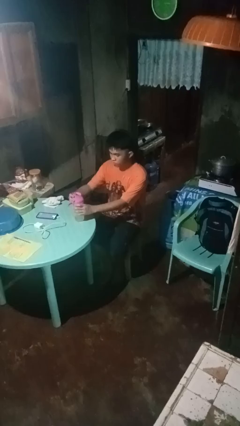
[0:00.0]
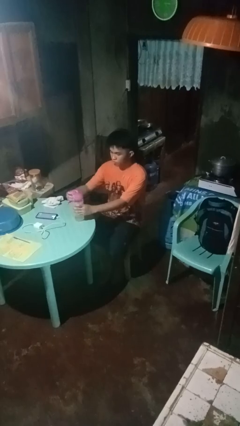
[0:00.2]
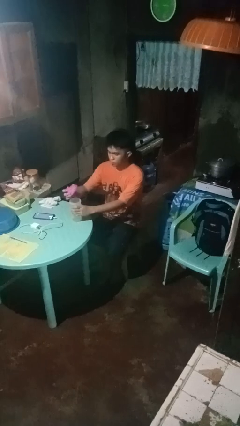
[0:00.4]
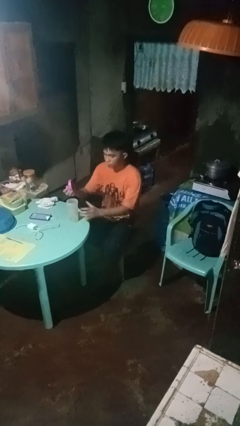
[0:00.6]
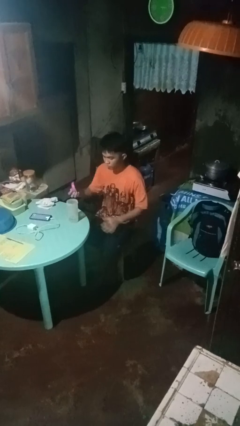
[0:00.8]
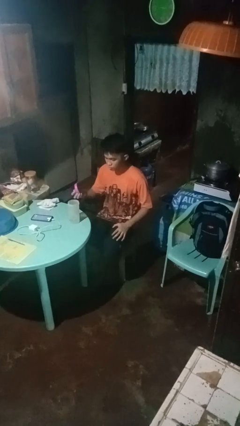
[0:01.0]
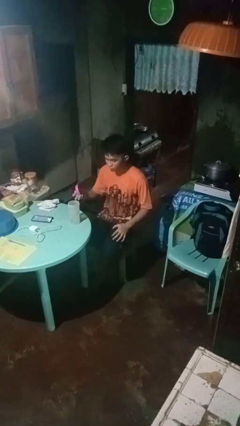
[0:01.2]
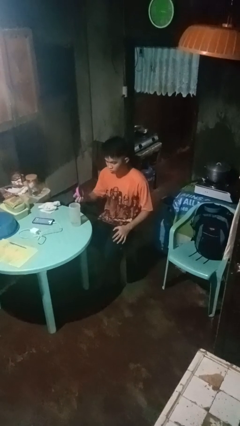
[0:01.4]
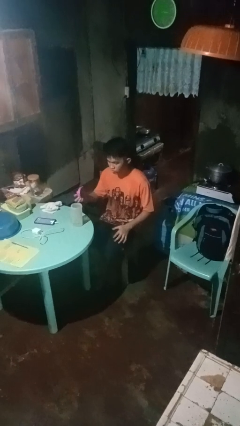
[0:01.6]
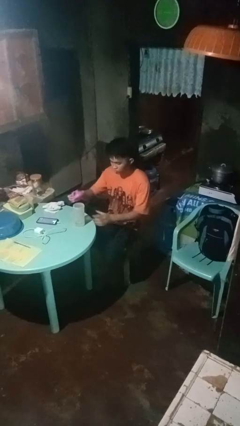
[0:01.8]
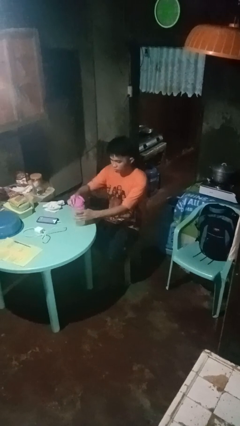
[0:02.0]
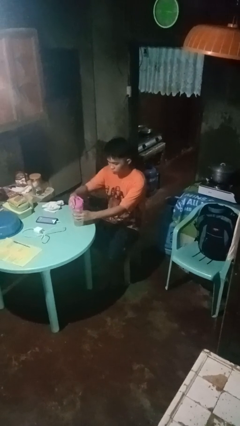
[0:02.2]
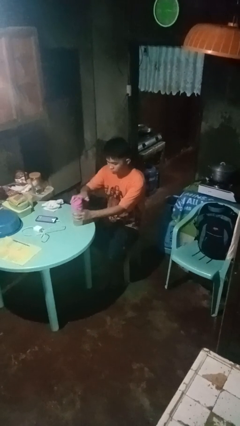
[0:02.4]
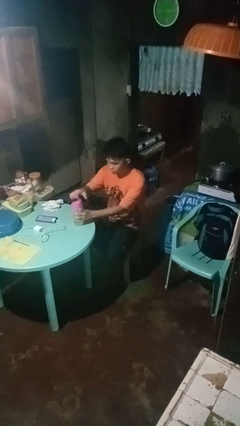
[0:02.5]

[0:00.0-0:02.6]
person unscrews lid from bottle

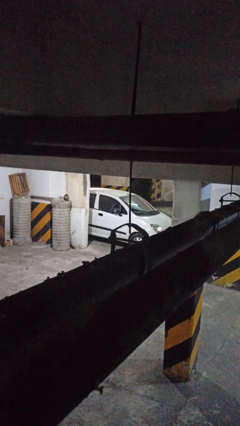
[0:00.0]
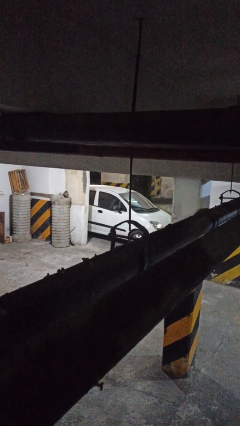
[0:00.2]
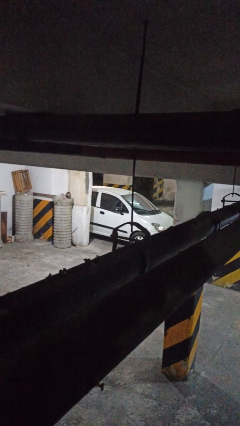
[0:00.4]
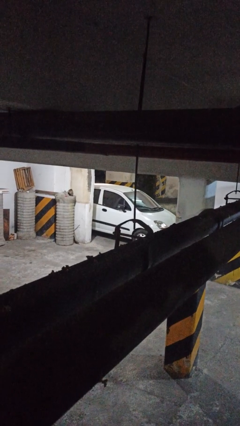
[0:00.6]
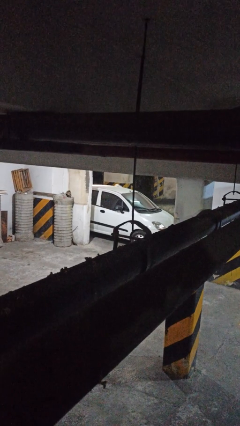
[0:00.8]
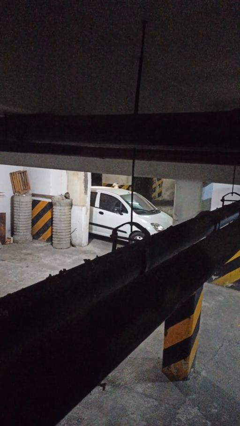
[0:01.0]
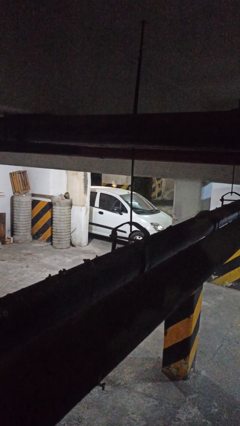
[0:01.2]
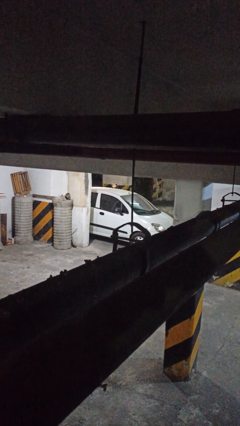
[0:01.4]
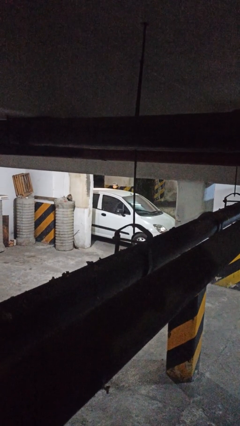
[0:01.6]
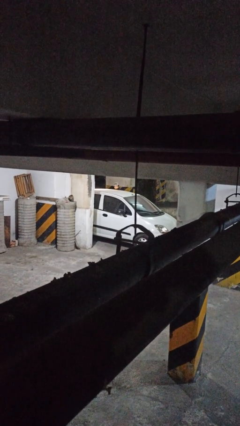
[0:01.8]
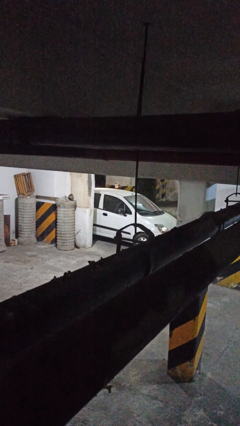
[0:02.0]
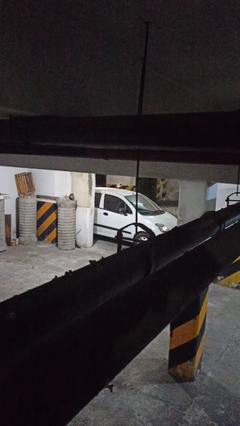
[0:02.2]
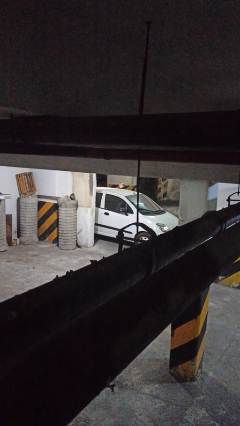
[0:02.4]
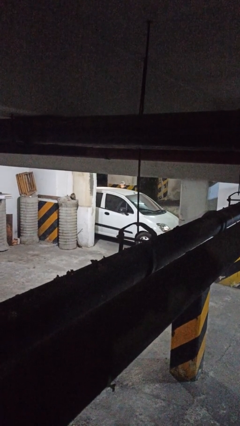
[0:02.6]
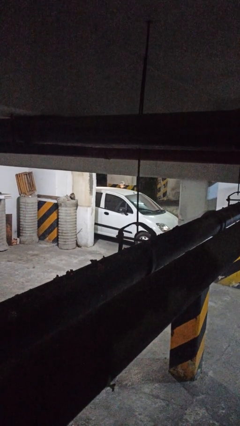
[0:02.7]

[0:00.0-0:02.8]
car drops off person

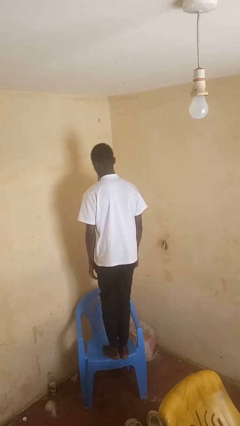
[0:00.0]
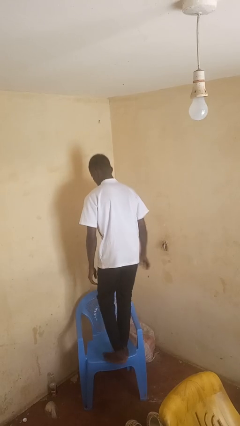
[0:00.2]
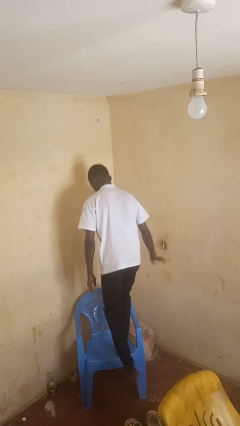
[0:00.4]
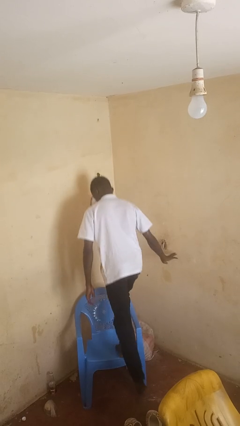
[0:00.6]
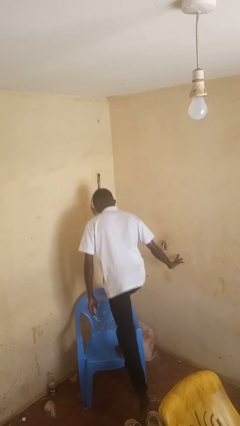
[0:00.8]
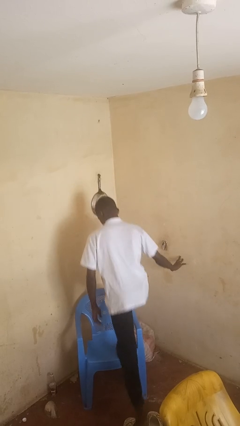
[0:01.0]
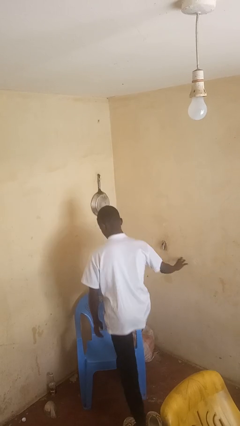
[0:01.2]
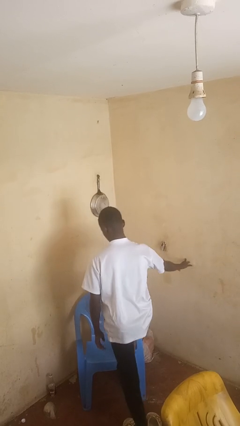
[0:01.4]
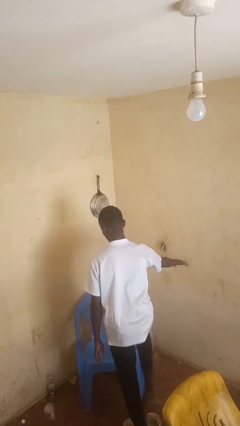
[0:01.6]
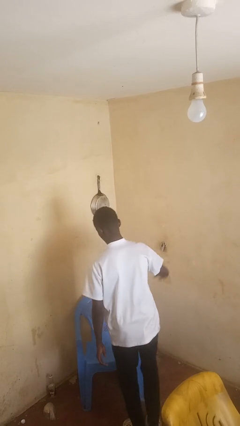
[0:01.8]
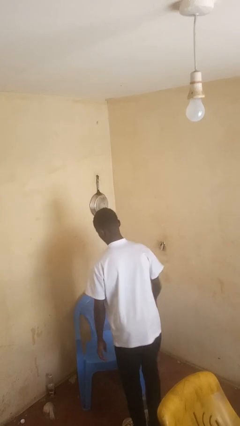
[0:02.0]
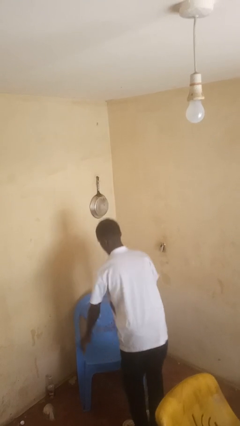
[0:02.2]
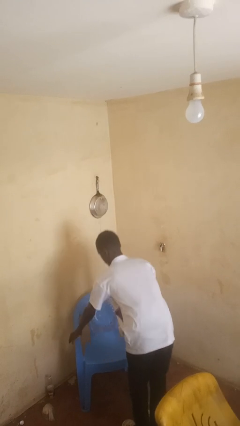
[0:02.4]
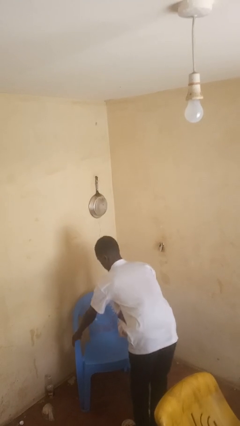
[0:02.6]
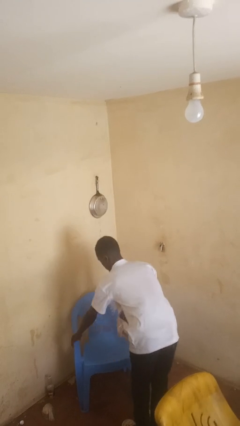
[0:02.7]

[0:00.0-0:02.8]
person climbs off chair

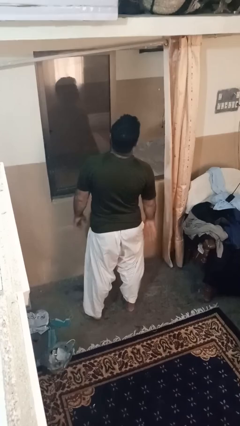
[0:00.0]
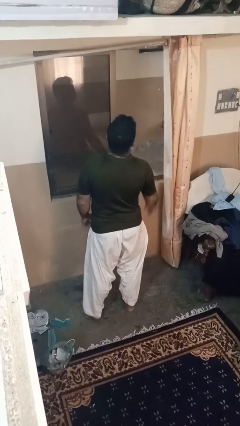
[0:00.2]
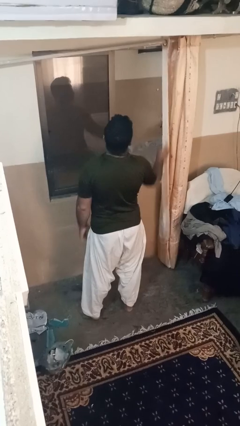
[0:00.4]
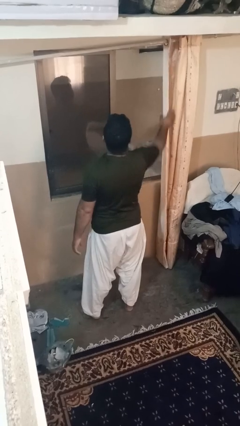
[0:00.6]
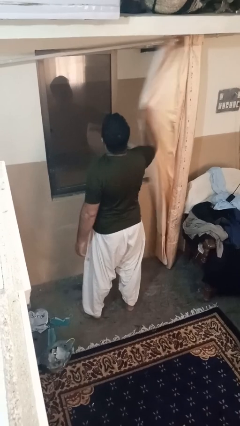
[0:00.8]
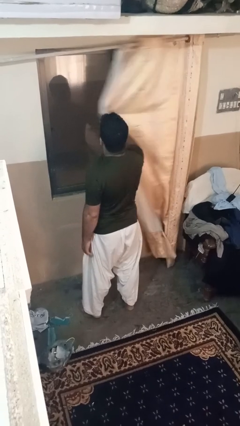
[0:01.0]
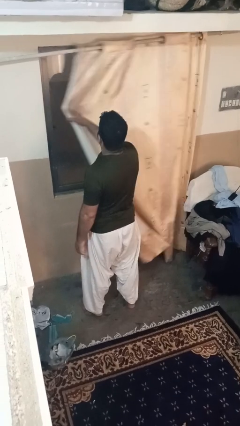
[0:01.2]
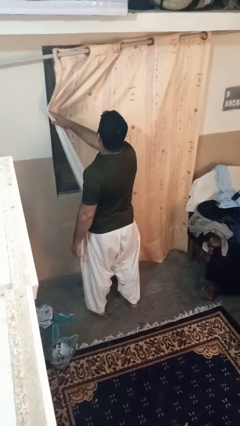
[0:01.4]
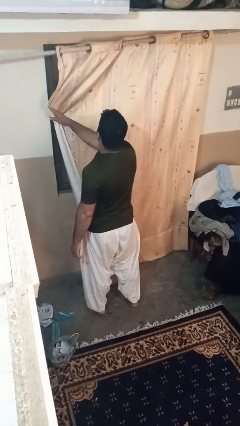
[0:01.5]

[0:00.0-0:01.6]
person closes curtains

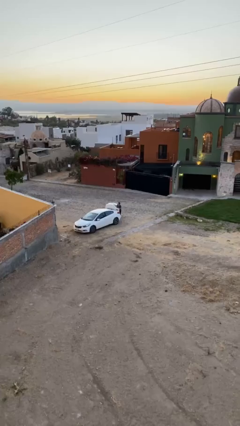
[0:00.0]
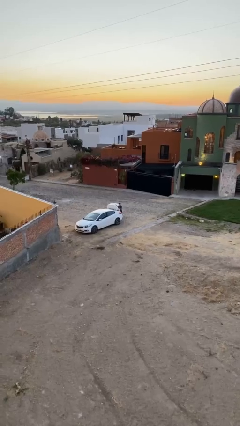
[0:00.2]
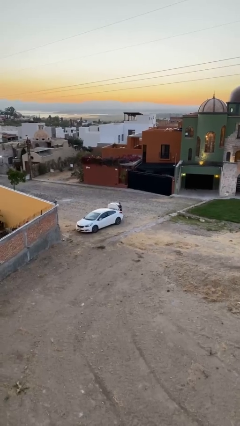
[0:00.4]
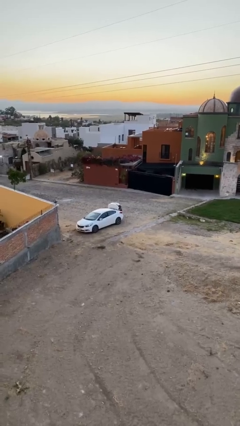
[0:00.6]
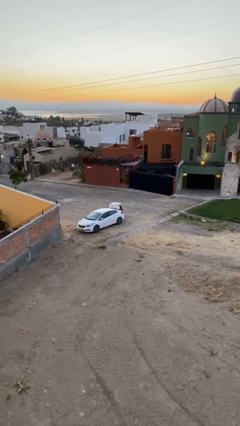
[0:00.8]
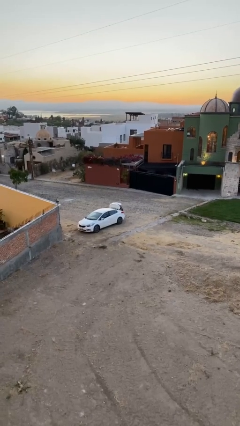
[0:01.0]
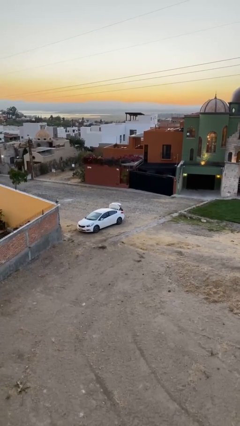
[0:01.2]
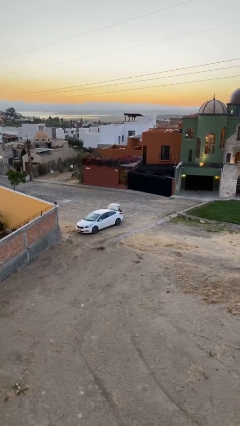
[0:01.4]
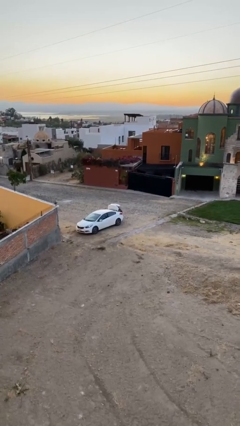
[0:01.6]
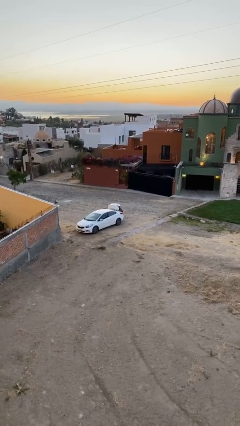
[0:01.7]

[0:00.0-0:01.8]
person loads car

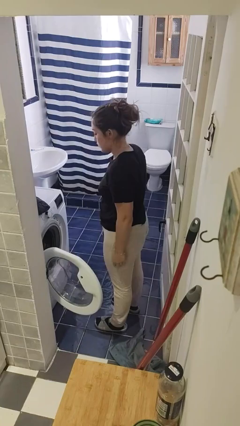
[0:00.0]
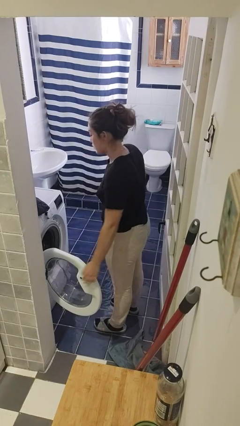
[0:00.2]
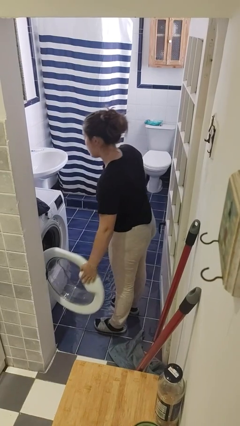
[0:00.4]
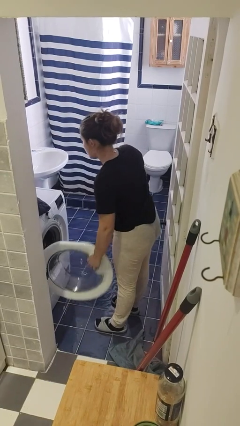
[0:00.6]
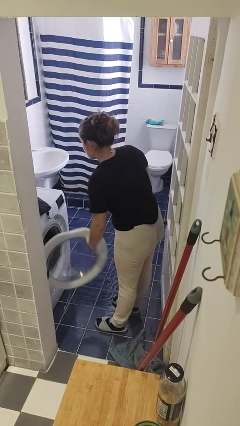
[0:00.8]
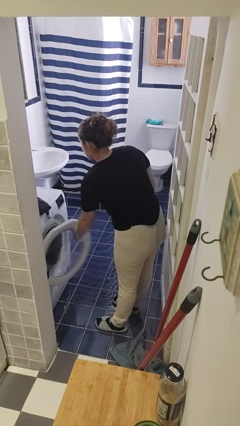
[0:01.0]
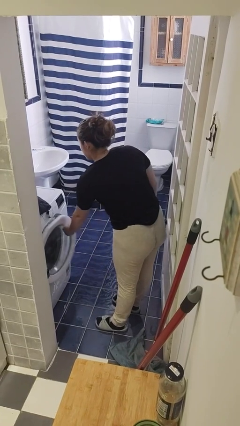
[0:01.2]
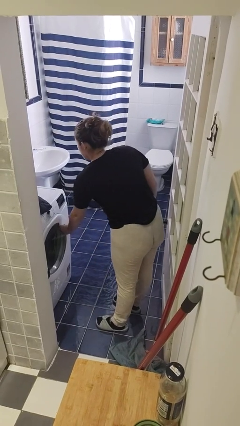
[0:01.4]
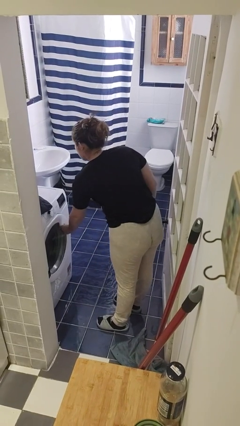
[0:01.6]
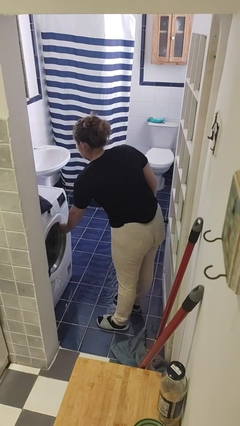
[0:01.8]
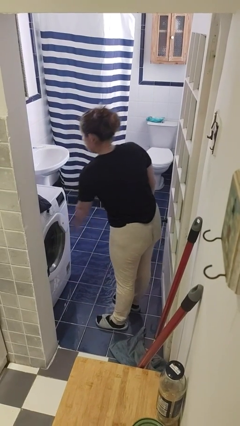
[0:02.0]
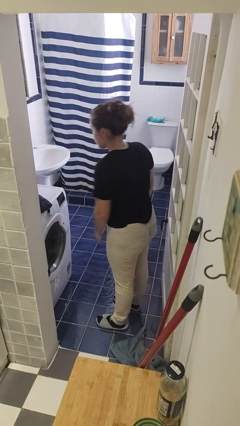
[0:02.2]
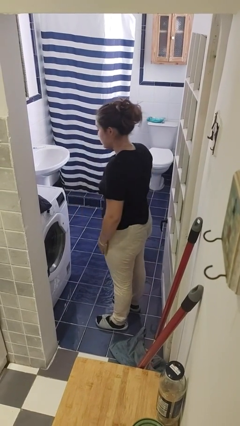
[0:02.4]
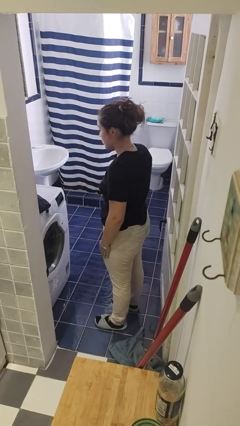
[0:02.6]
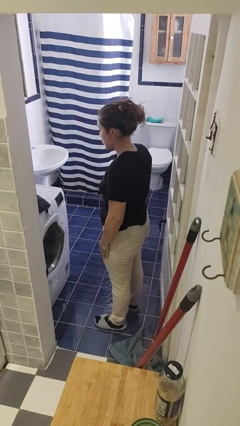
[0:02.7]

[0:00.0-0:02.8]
person closes clothes washer

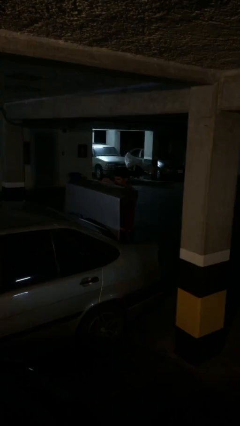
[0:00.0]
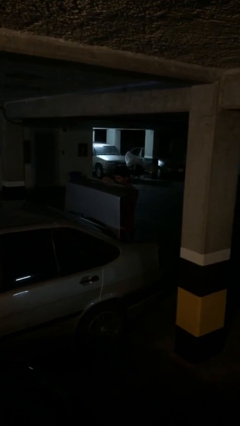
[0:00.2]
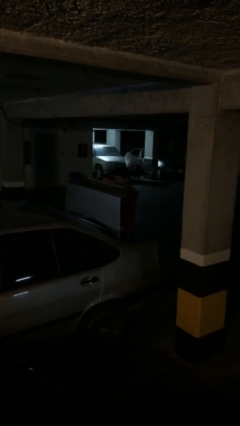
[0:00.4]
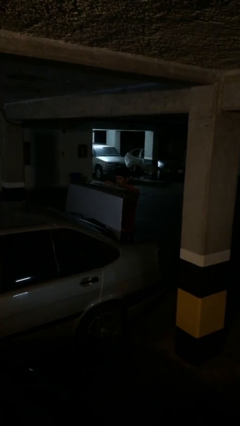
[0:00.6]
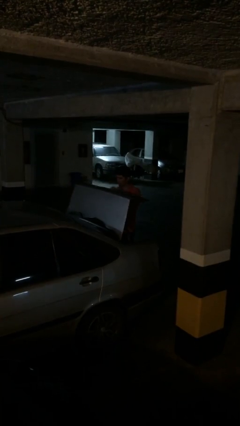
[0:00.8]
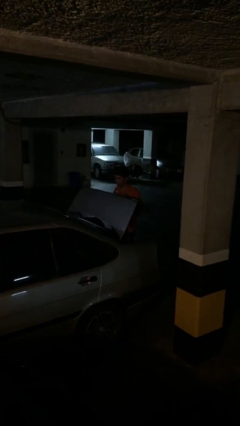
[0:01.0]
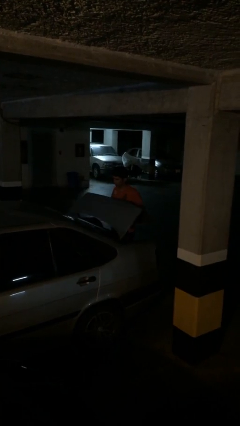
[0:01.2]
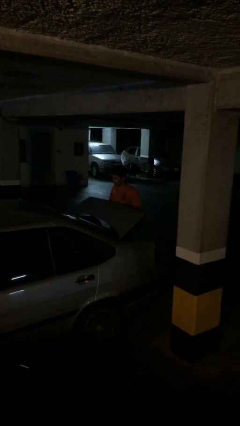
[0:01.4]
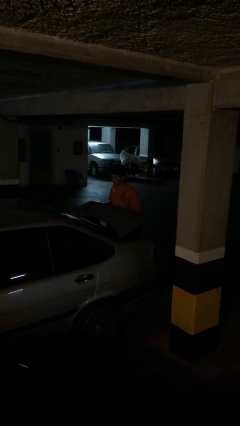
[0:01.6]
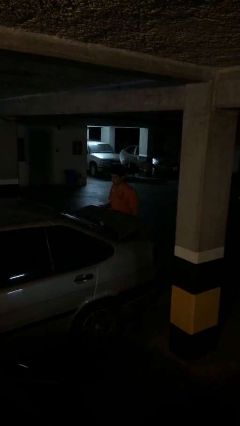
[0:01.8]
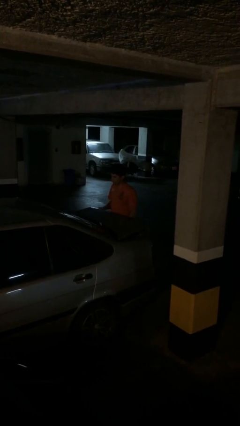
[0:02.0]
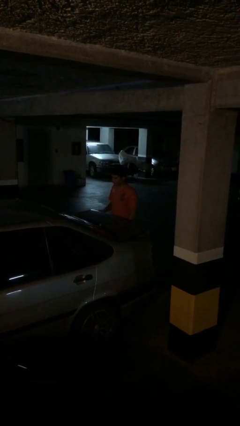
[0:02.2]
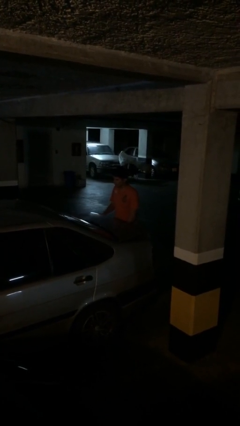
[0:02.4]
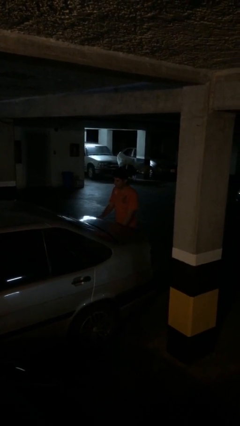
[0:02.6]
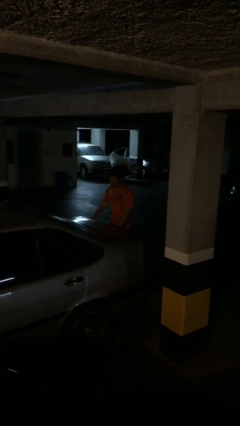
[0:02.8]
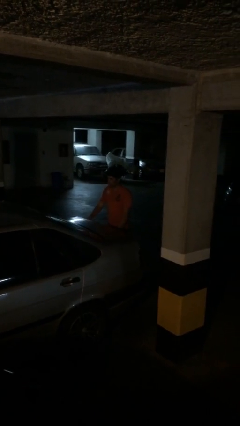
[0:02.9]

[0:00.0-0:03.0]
person closes car trunk

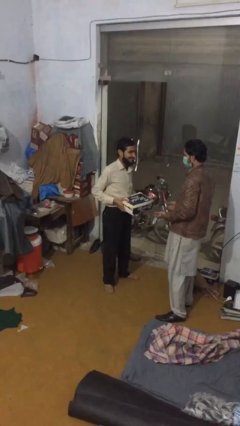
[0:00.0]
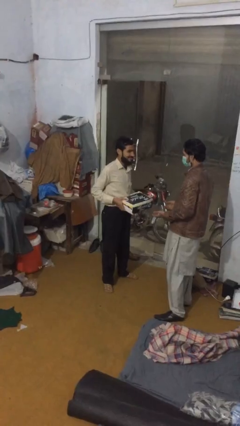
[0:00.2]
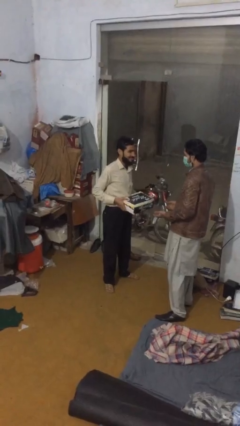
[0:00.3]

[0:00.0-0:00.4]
person transfers object to person
